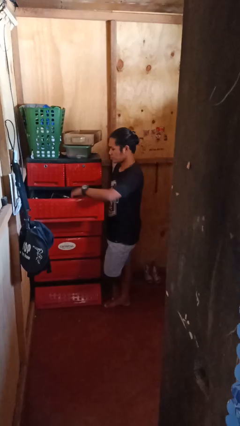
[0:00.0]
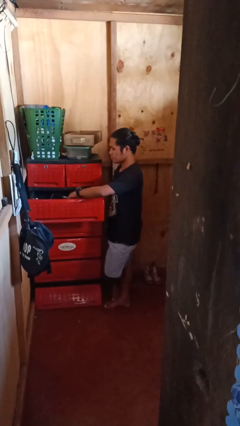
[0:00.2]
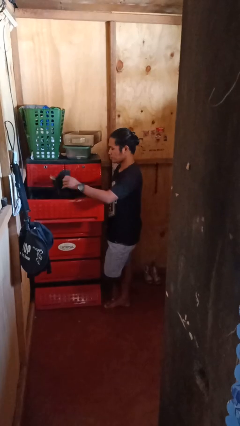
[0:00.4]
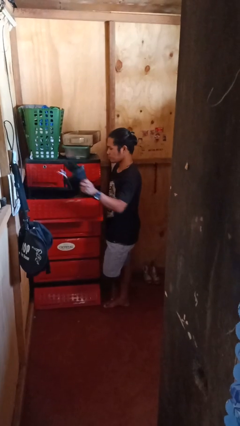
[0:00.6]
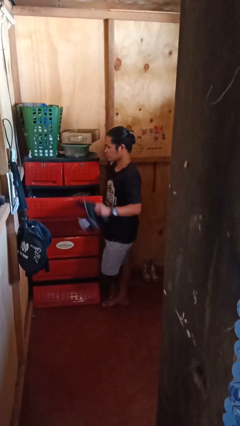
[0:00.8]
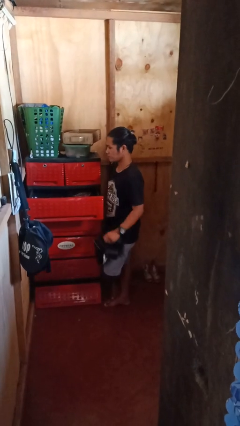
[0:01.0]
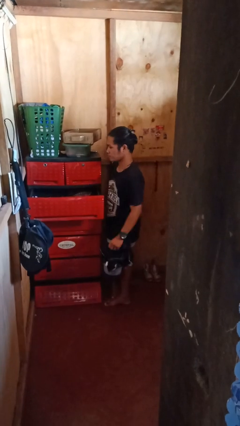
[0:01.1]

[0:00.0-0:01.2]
person takes clothes from dresser

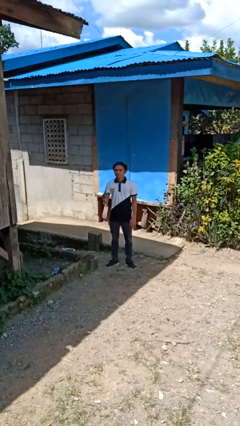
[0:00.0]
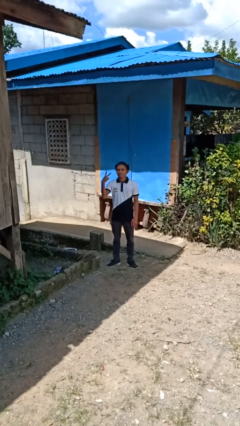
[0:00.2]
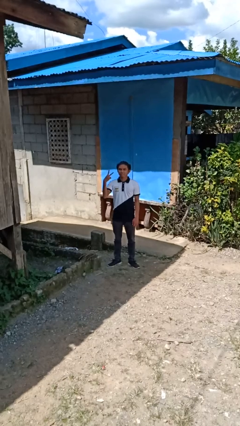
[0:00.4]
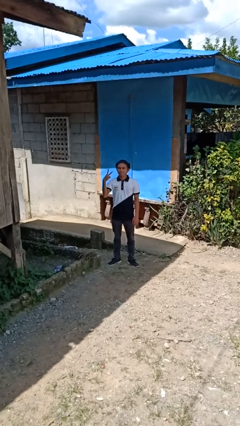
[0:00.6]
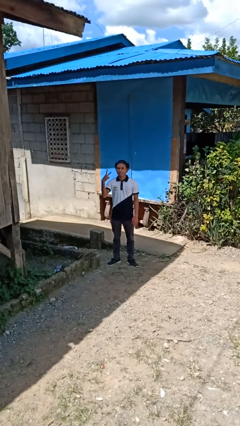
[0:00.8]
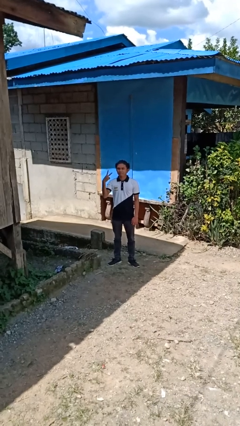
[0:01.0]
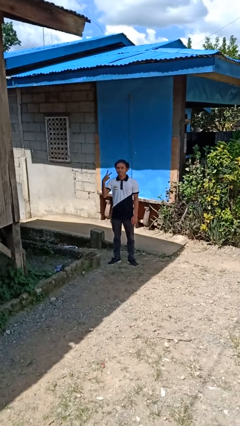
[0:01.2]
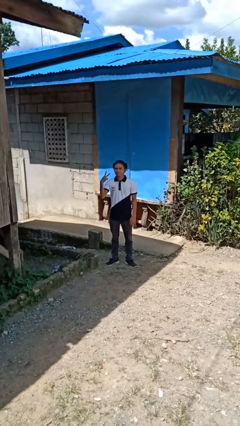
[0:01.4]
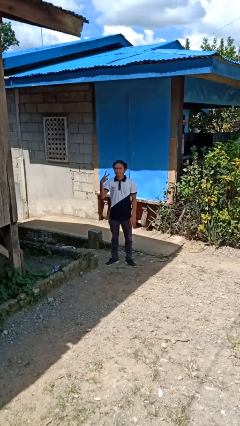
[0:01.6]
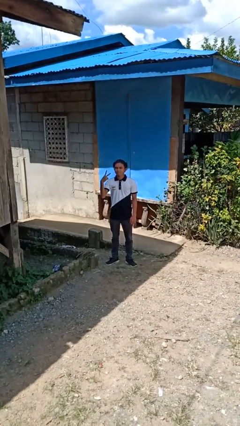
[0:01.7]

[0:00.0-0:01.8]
person gestures peace

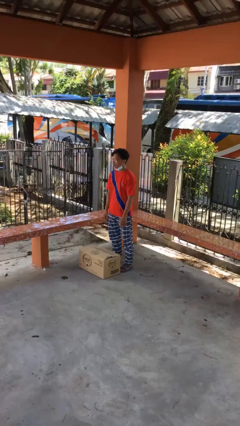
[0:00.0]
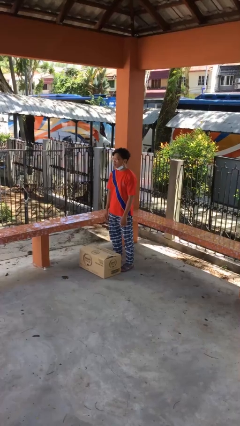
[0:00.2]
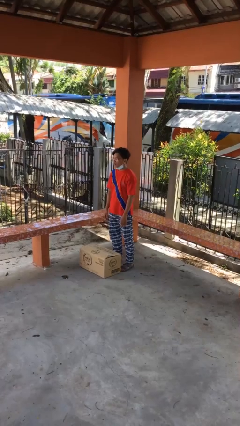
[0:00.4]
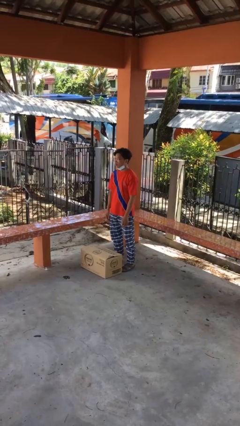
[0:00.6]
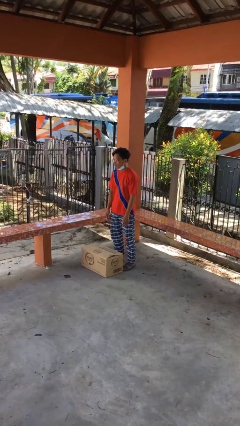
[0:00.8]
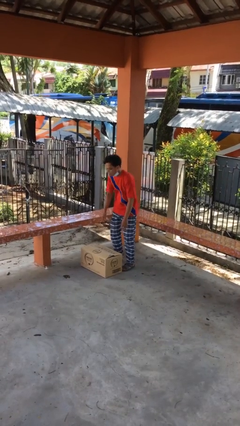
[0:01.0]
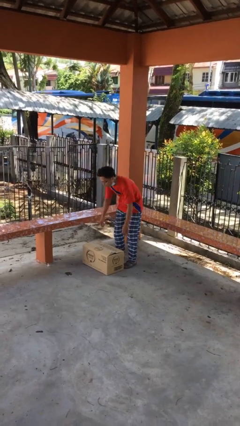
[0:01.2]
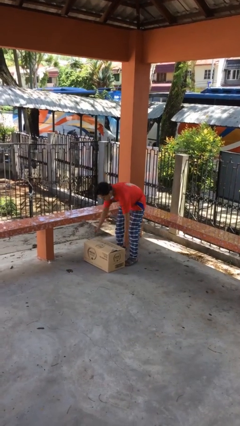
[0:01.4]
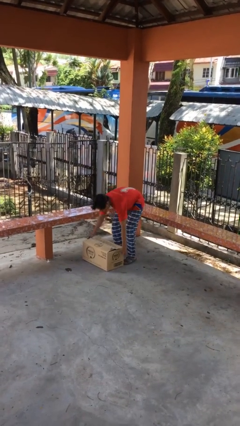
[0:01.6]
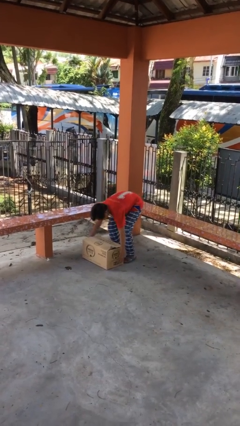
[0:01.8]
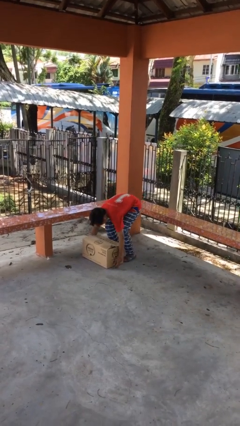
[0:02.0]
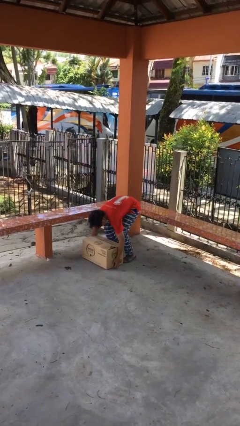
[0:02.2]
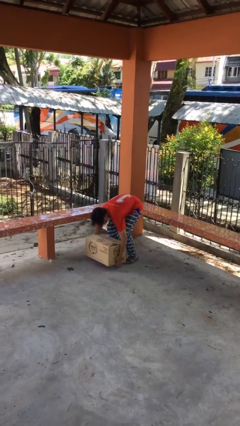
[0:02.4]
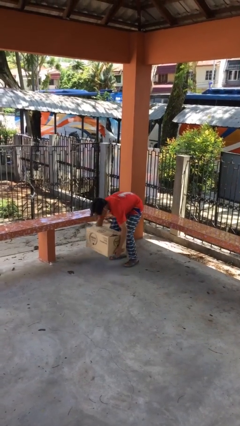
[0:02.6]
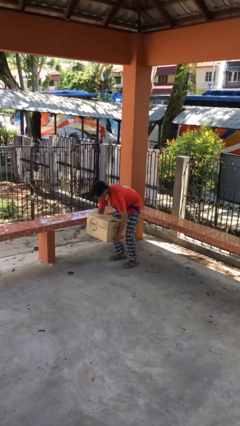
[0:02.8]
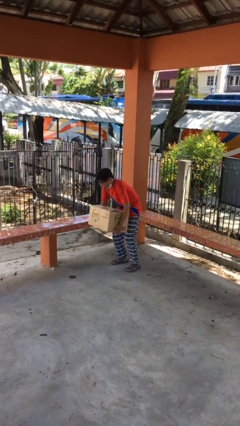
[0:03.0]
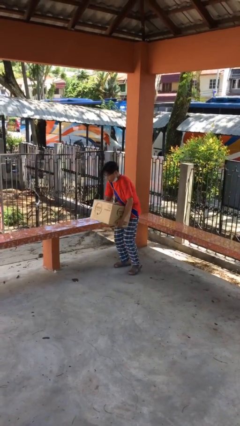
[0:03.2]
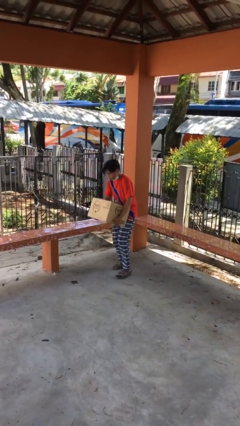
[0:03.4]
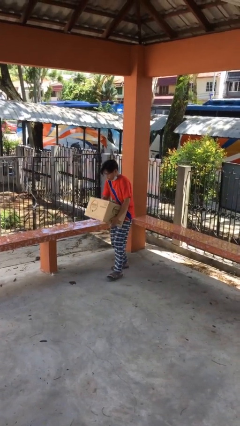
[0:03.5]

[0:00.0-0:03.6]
person picks up object from floor

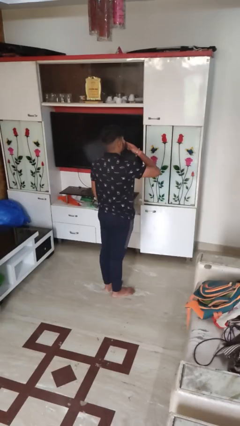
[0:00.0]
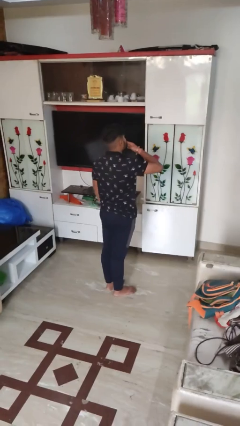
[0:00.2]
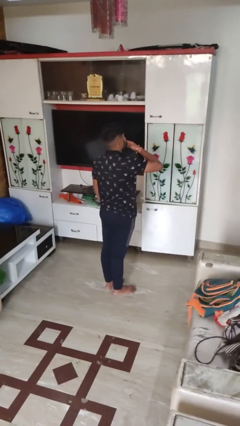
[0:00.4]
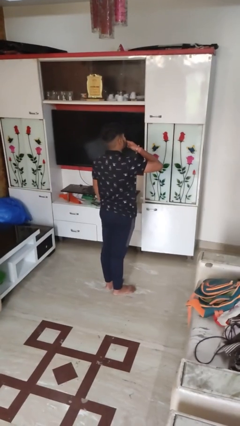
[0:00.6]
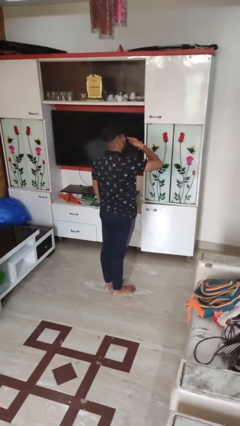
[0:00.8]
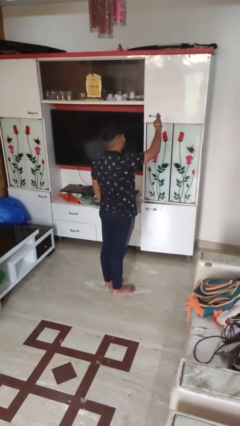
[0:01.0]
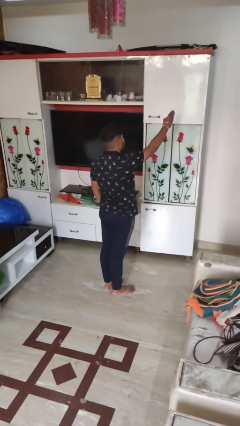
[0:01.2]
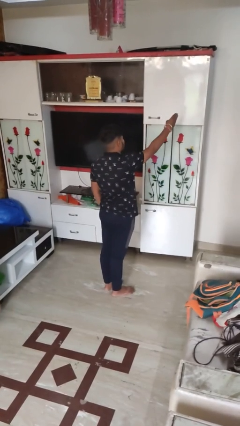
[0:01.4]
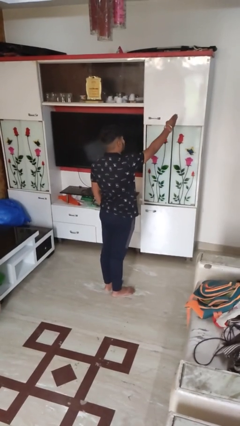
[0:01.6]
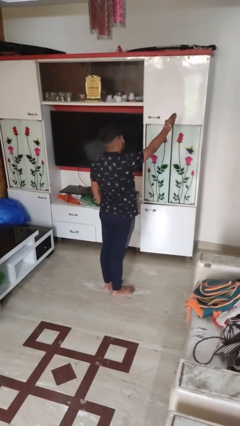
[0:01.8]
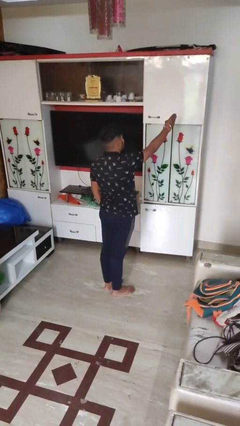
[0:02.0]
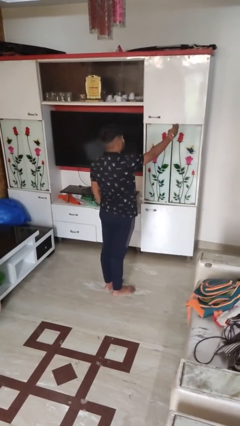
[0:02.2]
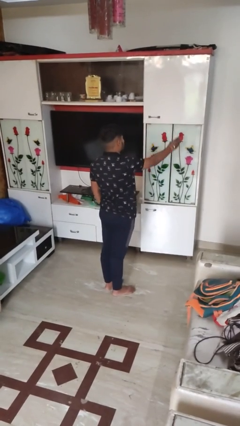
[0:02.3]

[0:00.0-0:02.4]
person gestures blow kiss

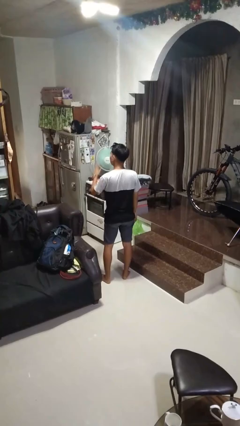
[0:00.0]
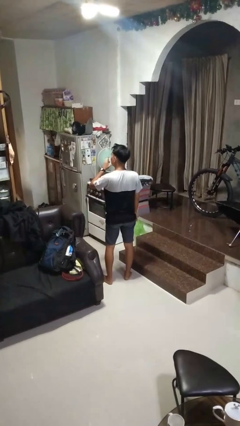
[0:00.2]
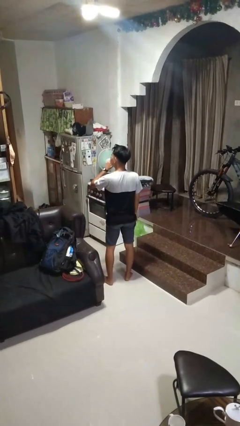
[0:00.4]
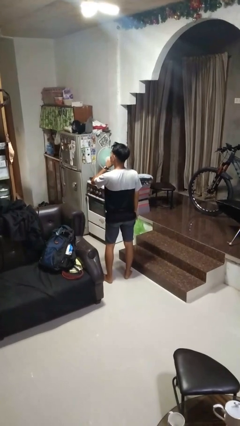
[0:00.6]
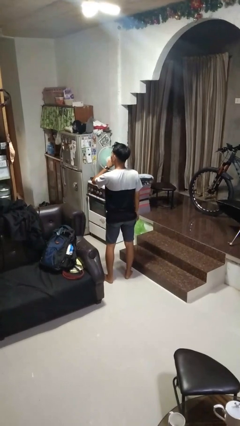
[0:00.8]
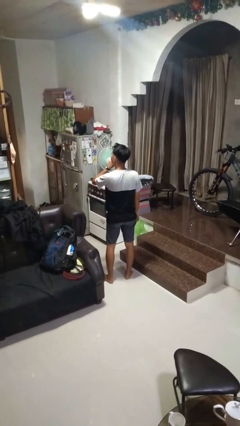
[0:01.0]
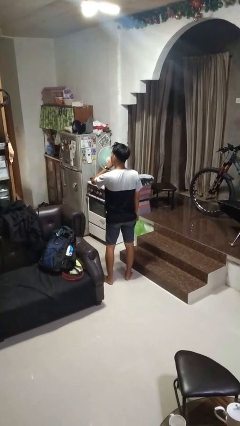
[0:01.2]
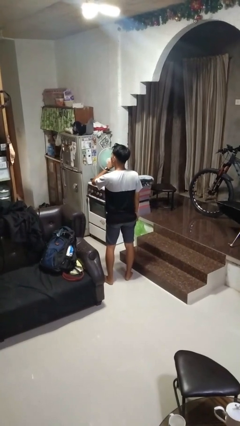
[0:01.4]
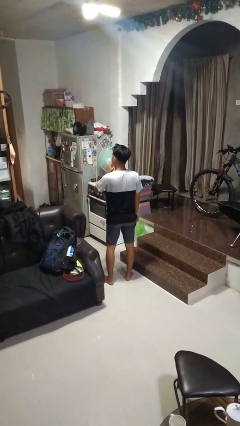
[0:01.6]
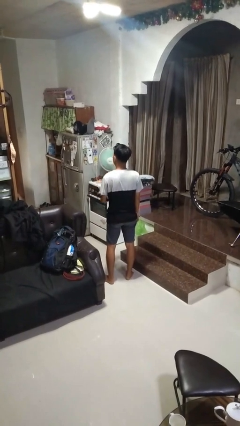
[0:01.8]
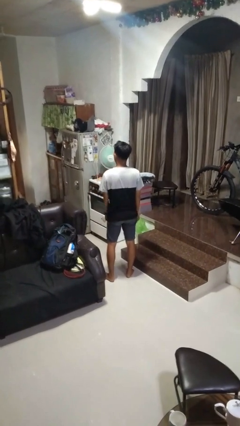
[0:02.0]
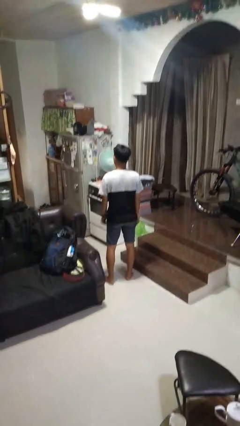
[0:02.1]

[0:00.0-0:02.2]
person gestures be quiet

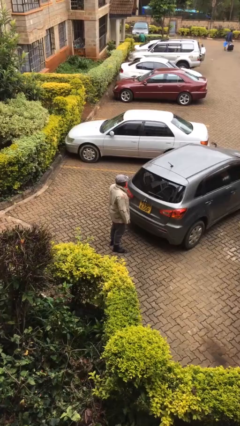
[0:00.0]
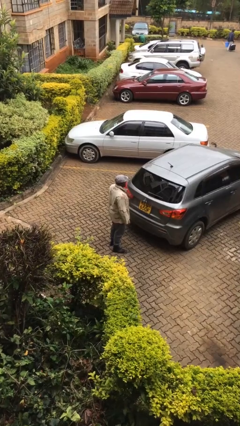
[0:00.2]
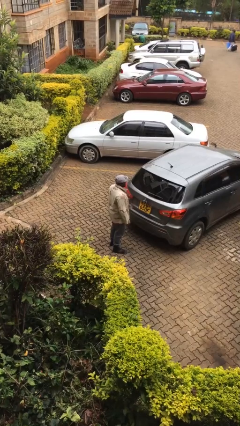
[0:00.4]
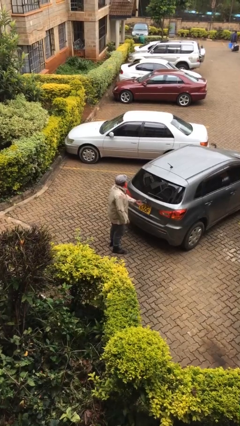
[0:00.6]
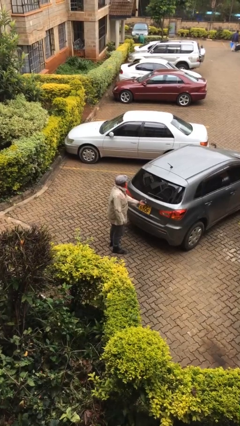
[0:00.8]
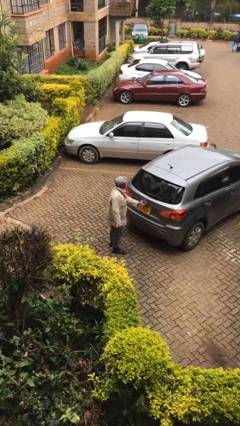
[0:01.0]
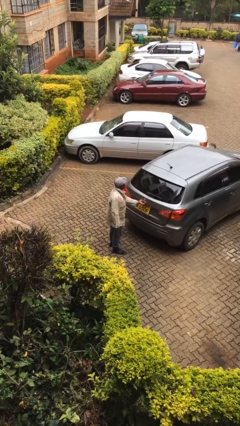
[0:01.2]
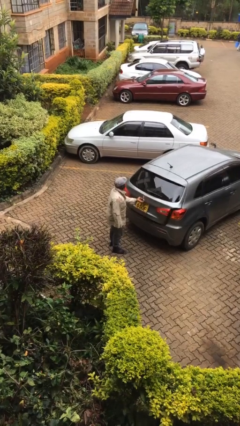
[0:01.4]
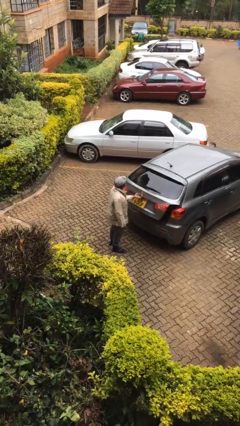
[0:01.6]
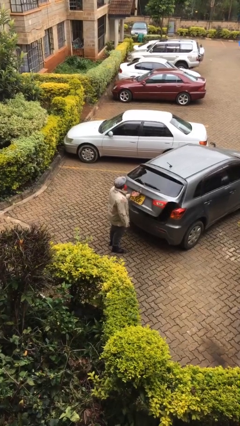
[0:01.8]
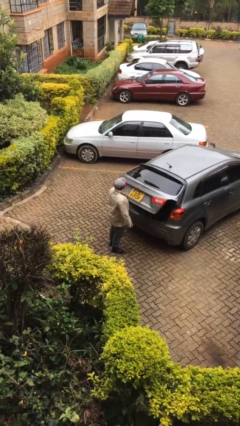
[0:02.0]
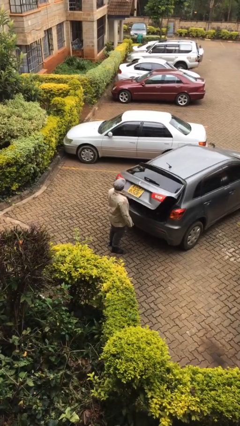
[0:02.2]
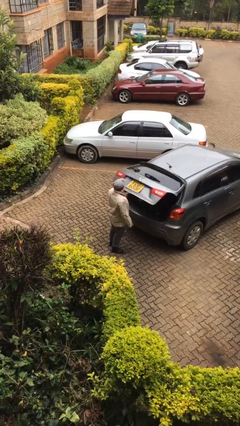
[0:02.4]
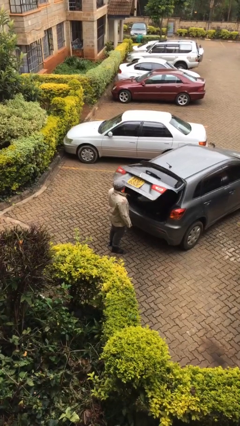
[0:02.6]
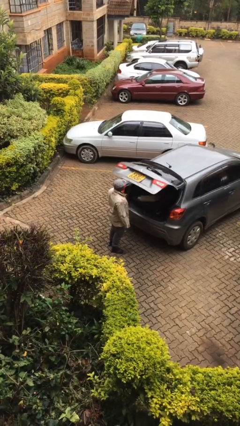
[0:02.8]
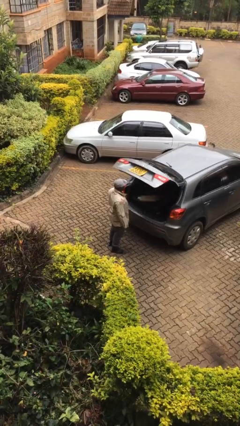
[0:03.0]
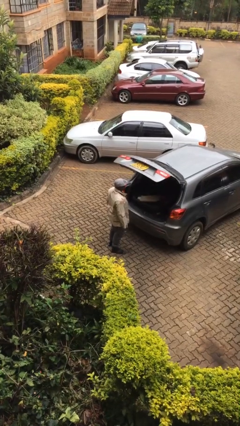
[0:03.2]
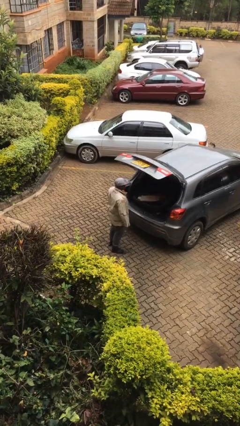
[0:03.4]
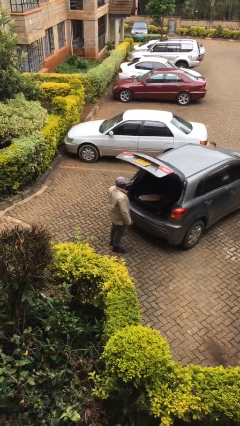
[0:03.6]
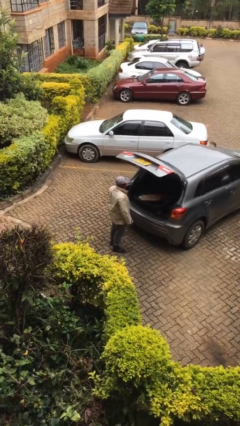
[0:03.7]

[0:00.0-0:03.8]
person opens car trunk

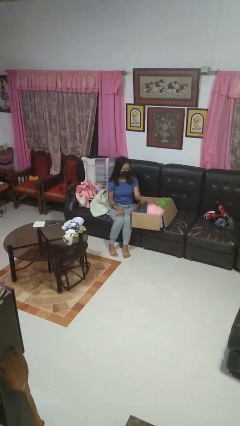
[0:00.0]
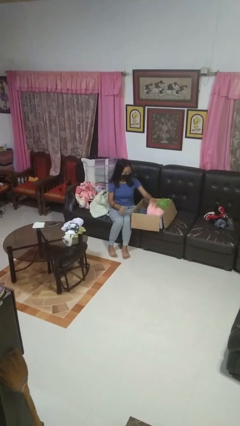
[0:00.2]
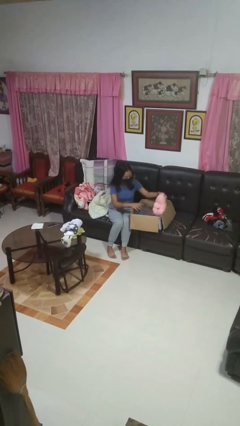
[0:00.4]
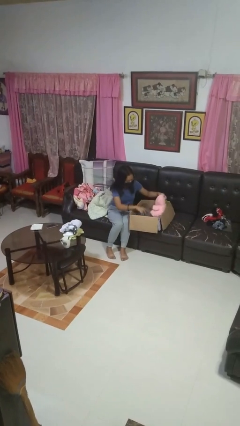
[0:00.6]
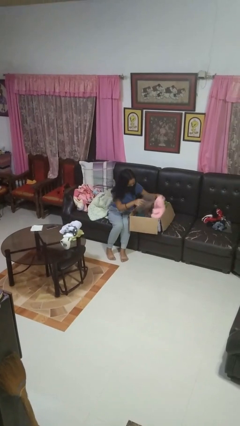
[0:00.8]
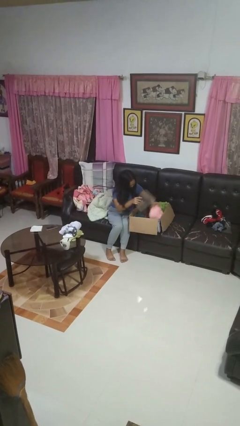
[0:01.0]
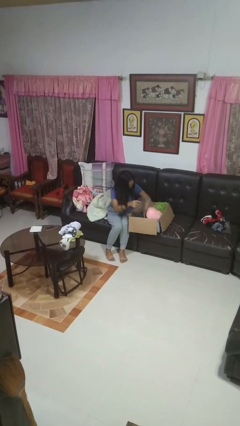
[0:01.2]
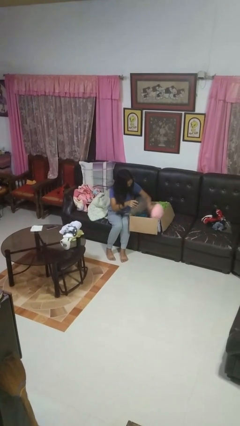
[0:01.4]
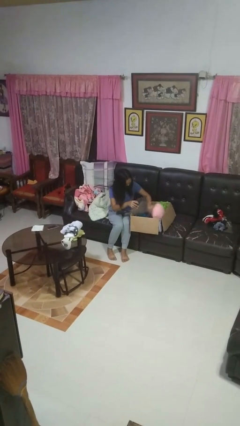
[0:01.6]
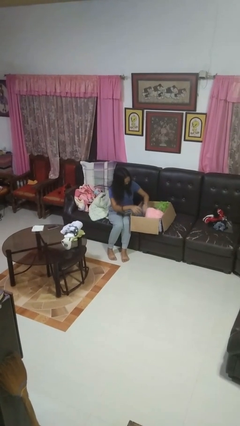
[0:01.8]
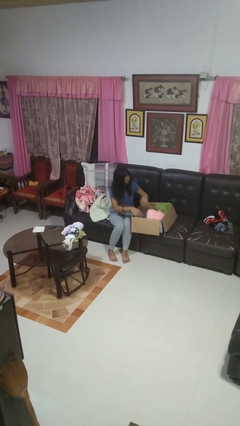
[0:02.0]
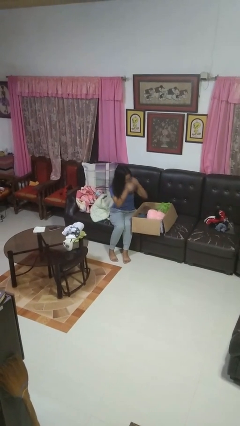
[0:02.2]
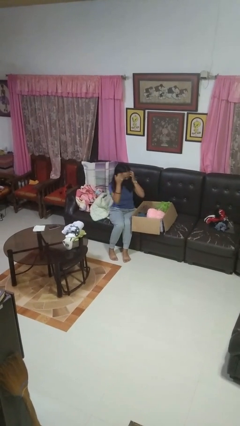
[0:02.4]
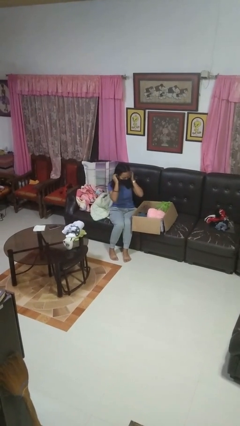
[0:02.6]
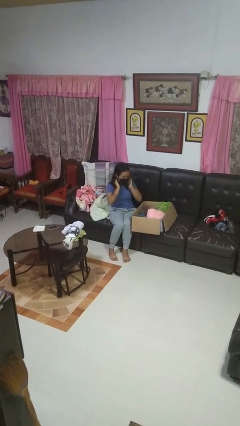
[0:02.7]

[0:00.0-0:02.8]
person searches in box
